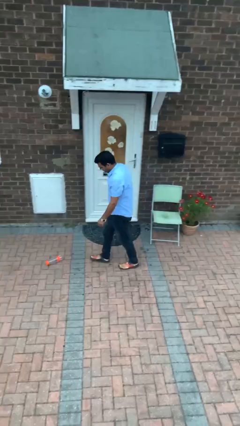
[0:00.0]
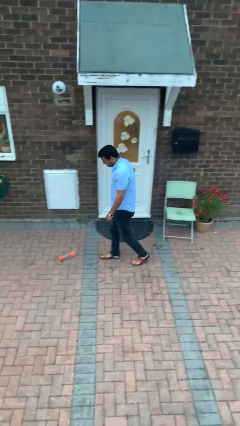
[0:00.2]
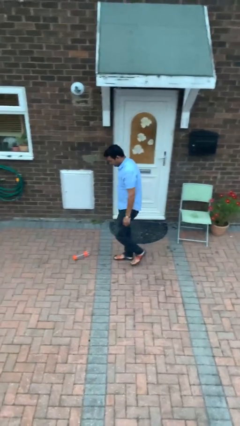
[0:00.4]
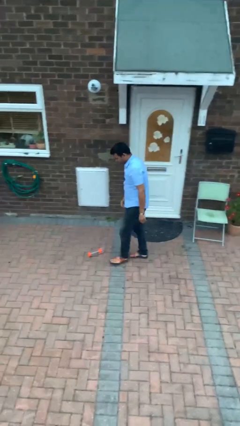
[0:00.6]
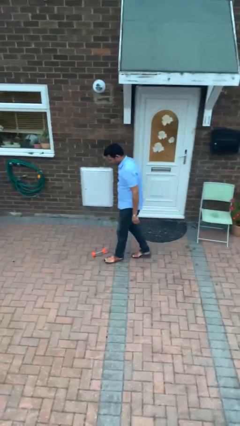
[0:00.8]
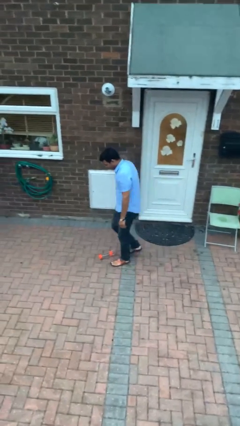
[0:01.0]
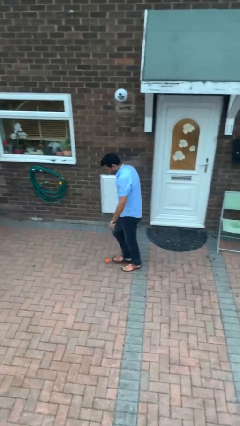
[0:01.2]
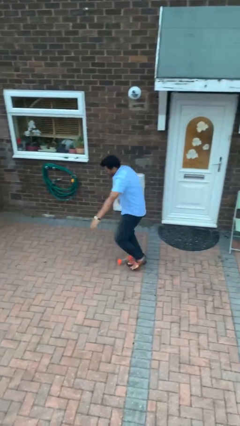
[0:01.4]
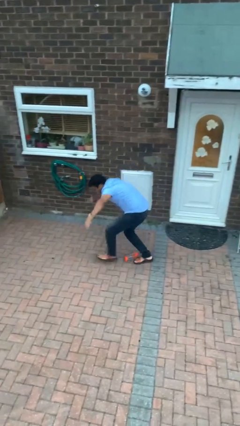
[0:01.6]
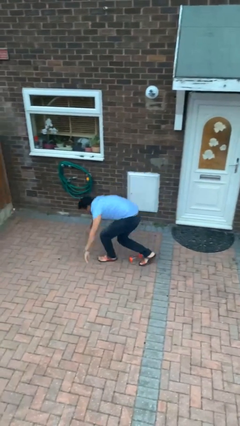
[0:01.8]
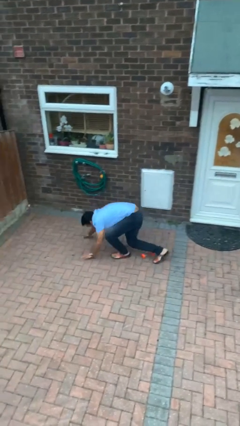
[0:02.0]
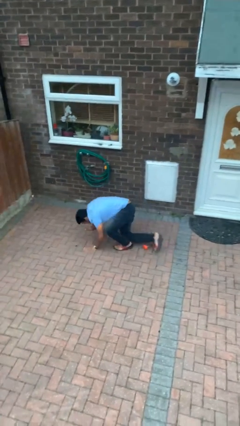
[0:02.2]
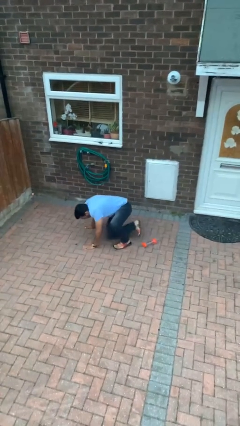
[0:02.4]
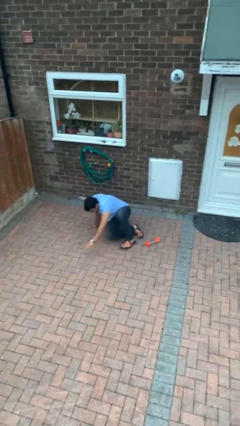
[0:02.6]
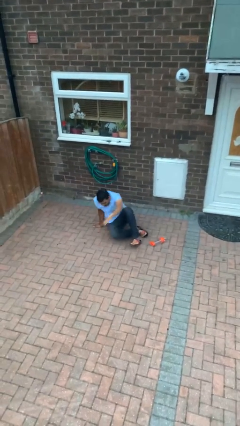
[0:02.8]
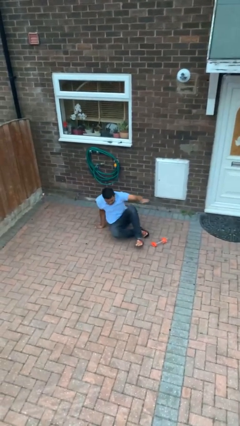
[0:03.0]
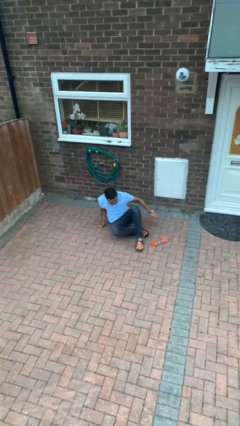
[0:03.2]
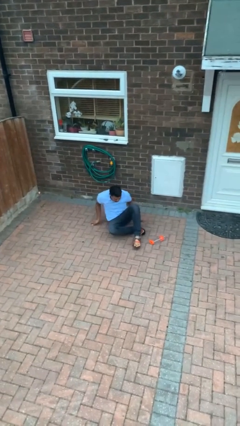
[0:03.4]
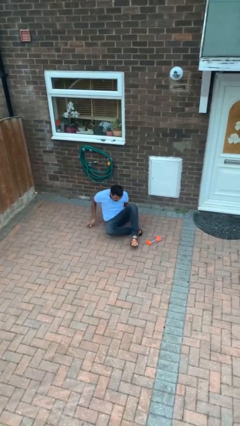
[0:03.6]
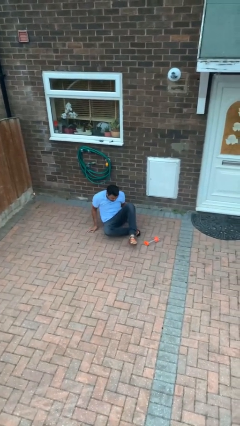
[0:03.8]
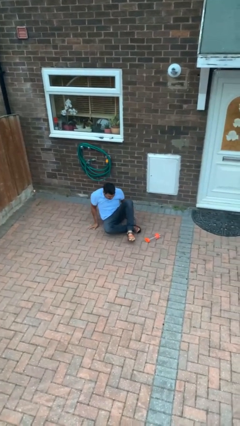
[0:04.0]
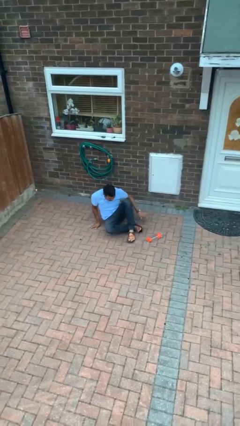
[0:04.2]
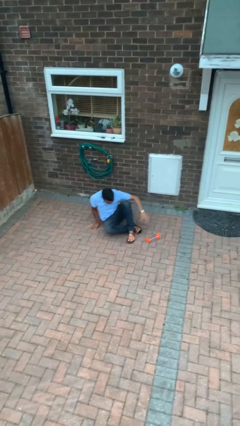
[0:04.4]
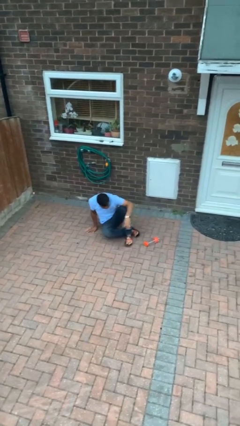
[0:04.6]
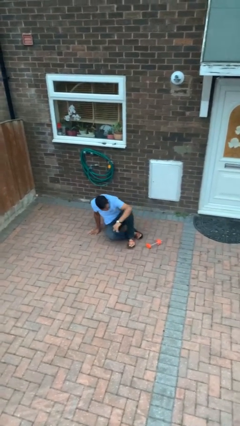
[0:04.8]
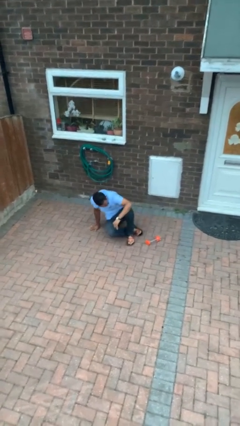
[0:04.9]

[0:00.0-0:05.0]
person trips on object on floor

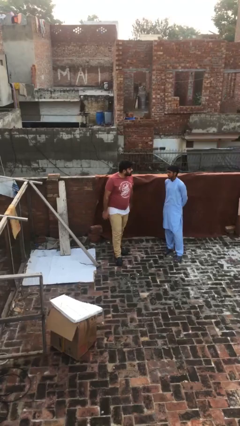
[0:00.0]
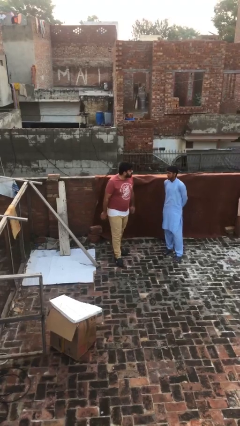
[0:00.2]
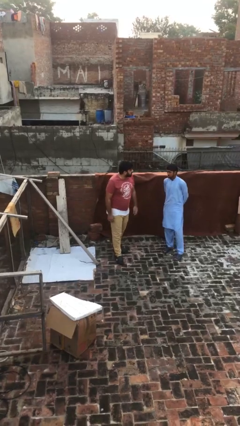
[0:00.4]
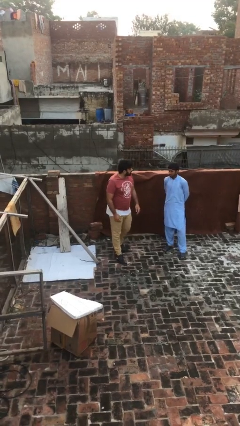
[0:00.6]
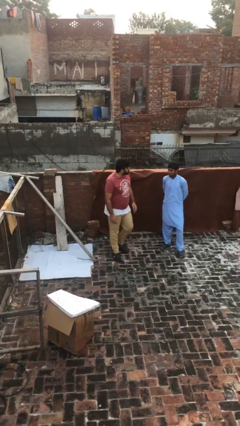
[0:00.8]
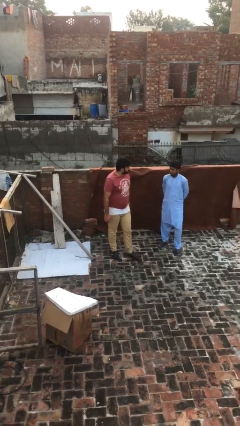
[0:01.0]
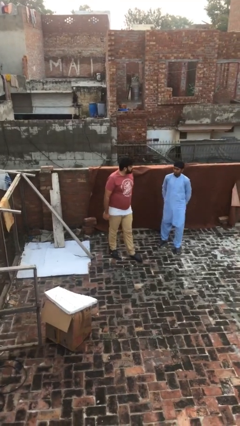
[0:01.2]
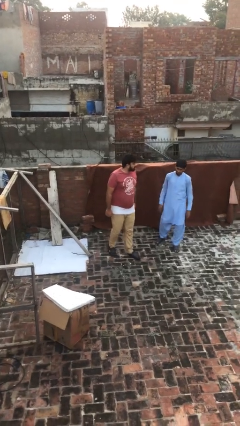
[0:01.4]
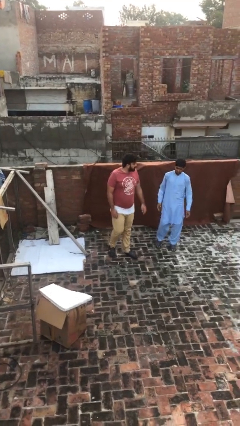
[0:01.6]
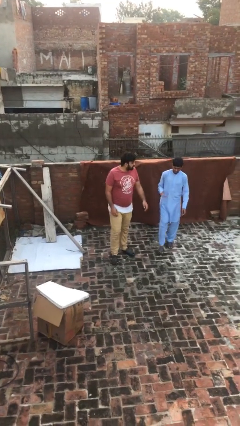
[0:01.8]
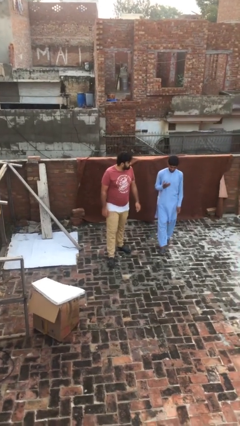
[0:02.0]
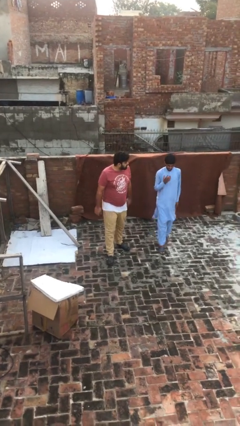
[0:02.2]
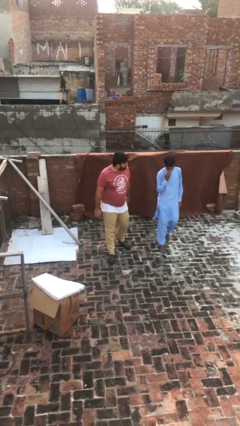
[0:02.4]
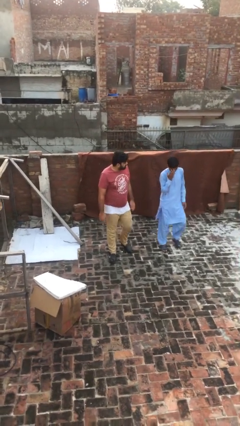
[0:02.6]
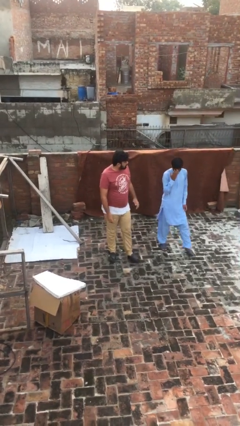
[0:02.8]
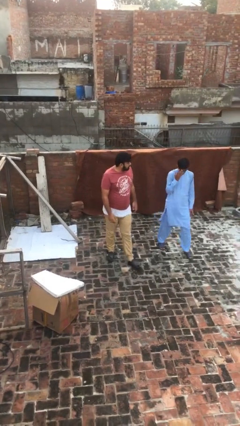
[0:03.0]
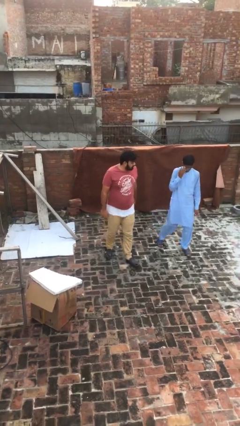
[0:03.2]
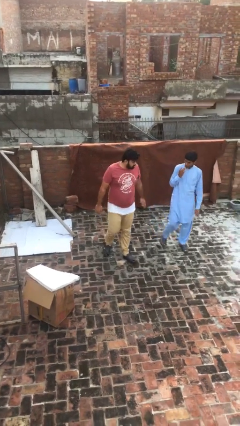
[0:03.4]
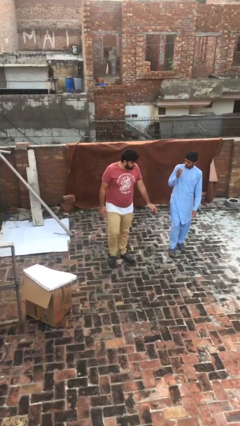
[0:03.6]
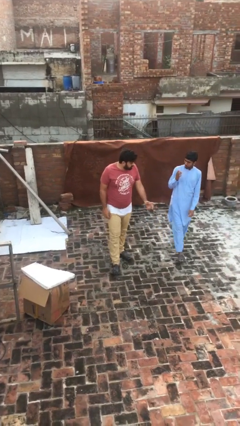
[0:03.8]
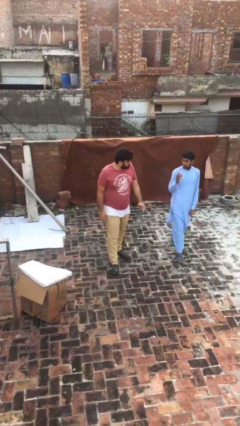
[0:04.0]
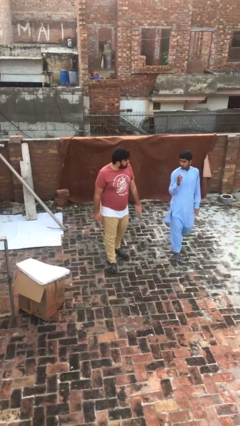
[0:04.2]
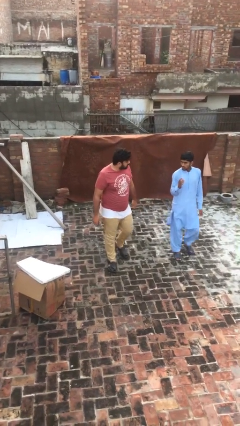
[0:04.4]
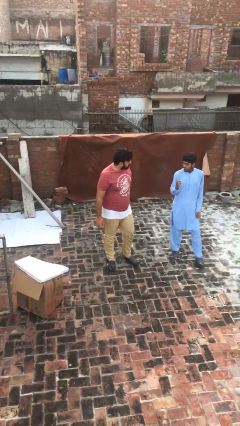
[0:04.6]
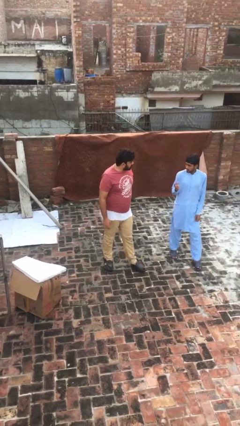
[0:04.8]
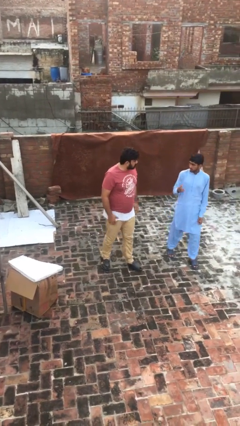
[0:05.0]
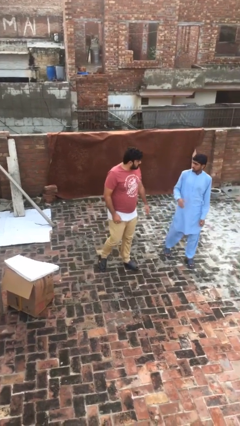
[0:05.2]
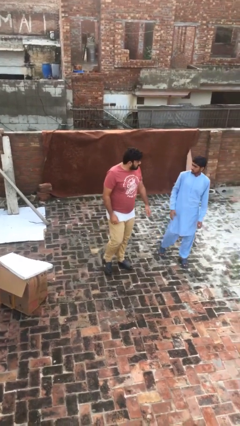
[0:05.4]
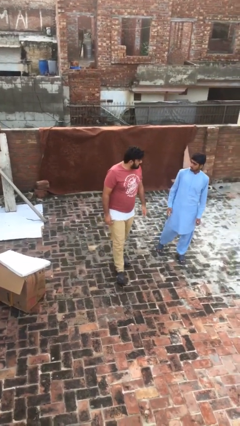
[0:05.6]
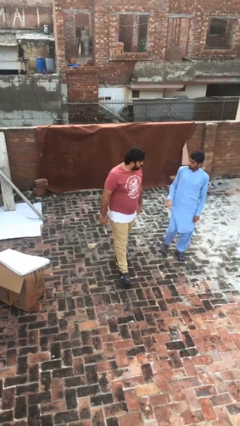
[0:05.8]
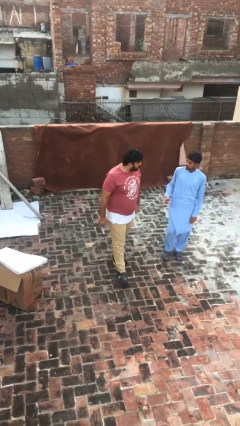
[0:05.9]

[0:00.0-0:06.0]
person talks to person

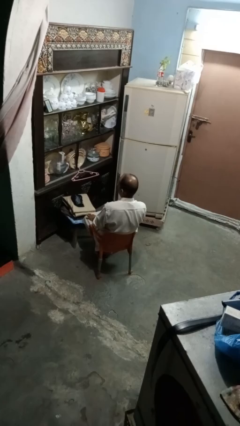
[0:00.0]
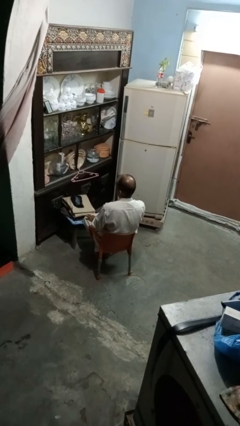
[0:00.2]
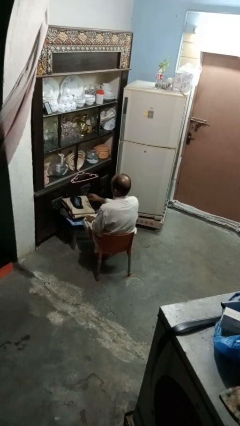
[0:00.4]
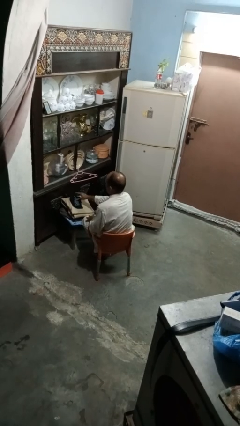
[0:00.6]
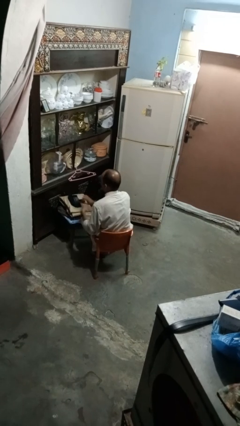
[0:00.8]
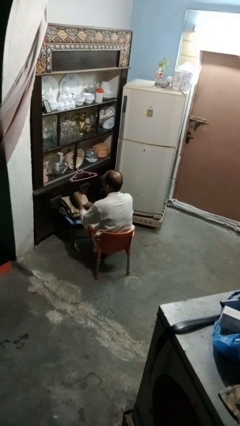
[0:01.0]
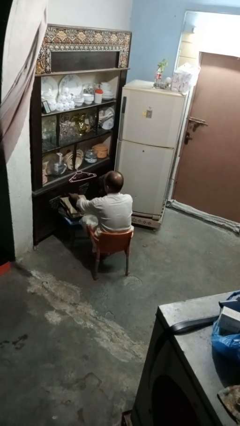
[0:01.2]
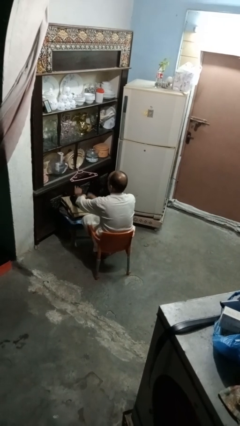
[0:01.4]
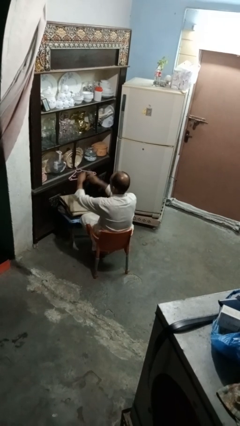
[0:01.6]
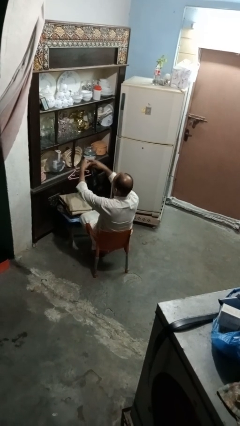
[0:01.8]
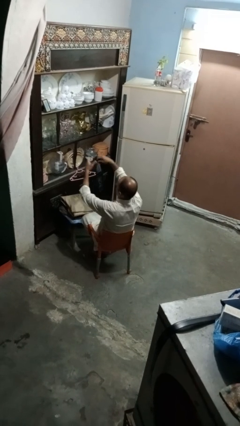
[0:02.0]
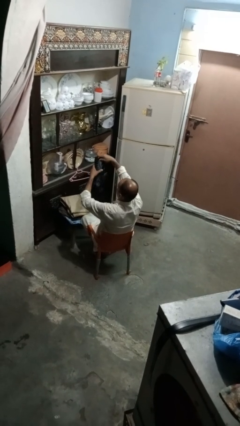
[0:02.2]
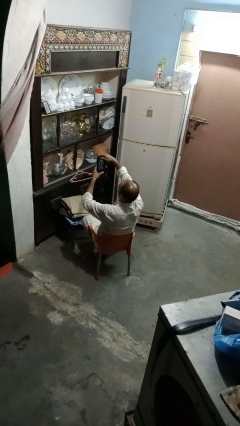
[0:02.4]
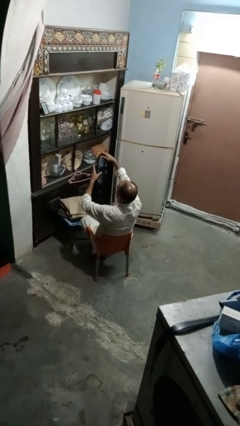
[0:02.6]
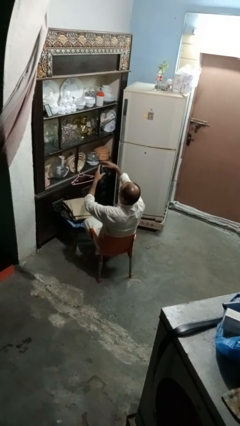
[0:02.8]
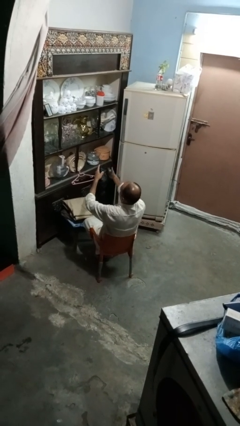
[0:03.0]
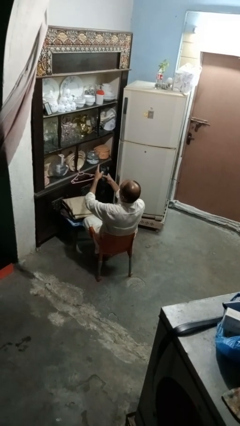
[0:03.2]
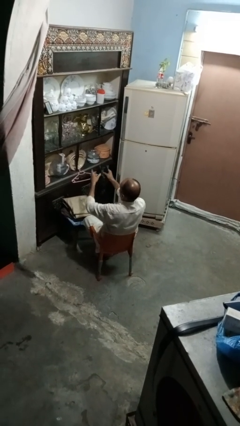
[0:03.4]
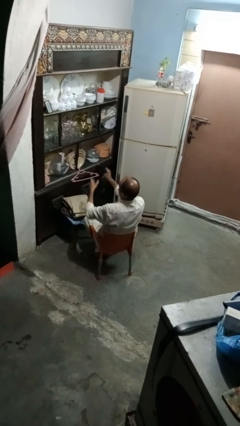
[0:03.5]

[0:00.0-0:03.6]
person folds socks

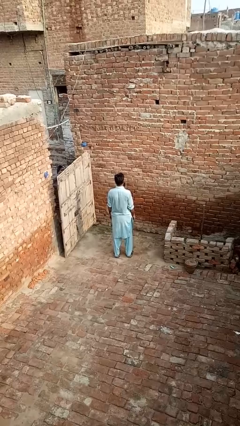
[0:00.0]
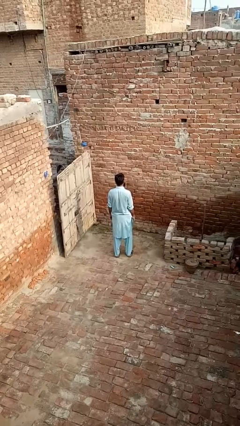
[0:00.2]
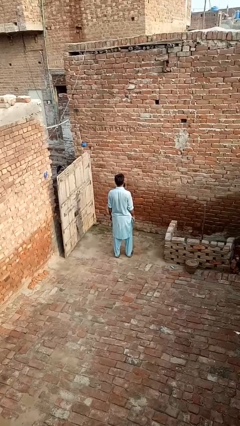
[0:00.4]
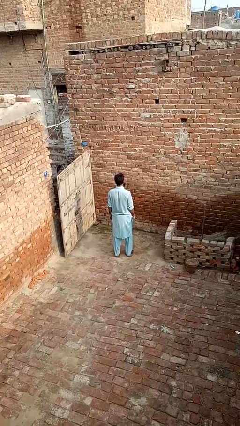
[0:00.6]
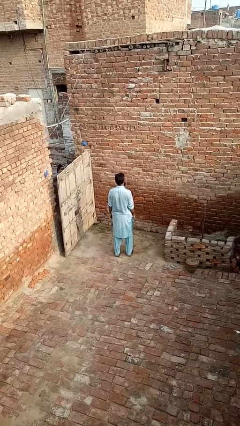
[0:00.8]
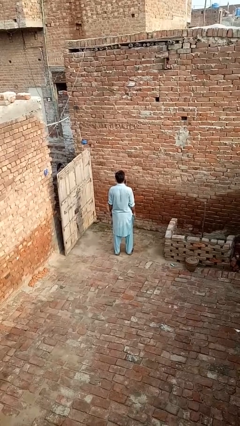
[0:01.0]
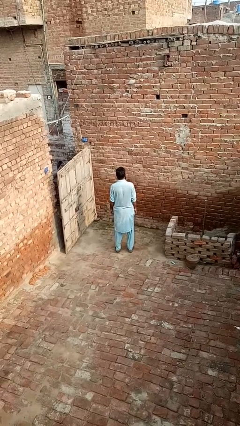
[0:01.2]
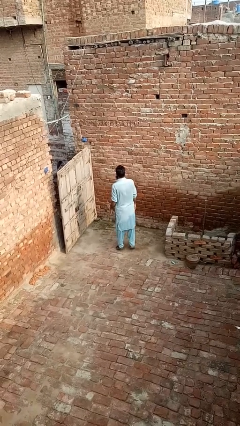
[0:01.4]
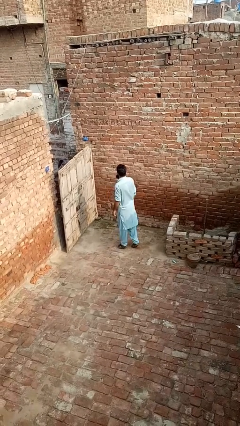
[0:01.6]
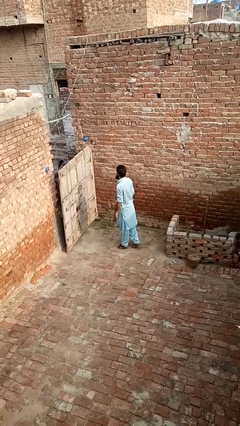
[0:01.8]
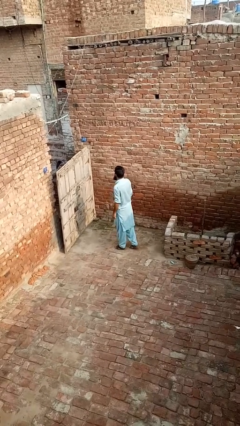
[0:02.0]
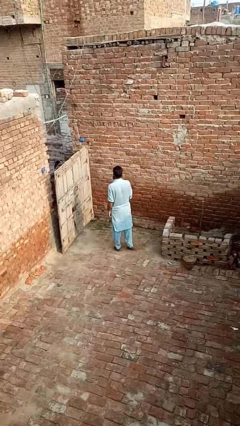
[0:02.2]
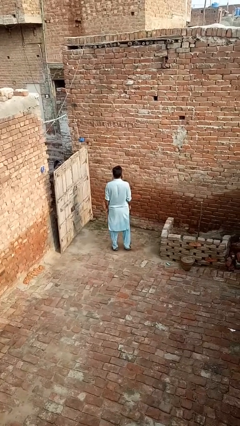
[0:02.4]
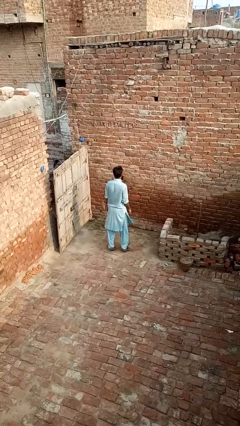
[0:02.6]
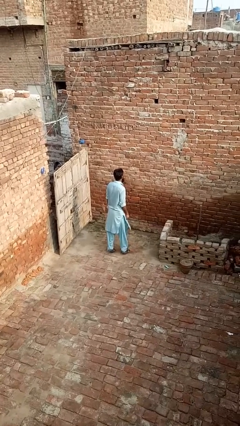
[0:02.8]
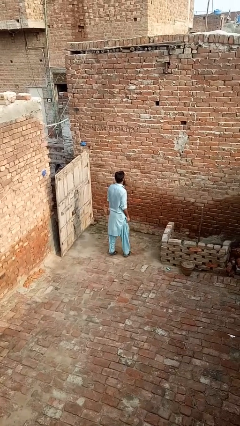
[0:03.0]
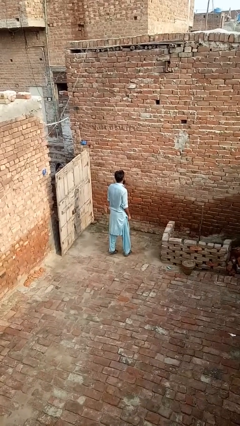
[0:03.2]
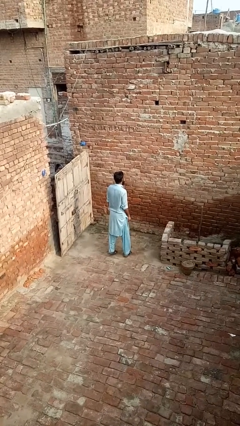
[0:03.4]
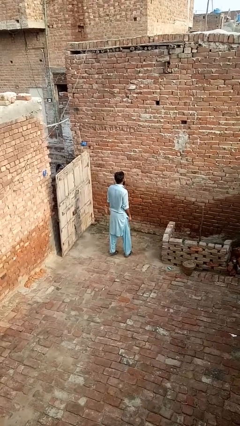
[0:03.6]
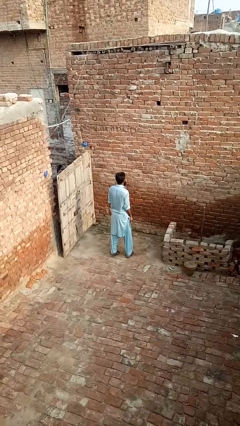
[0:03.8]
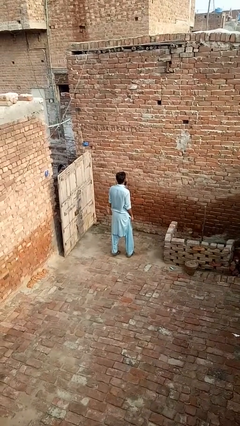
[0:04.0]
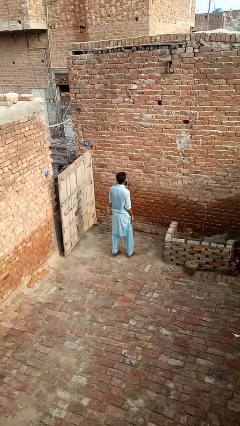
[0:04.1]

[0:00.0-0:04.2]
person twirls
